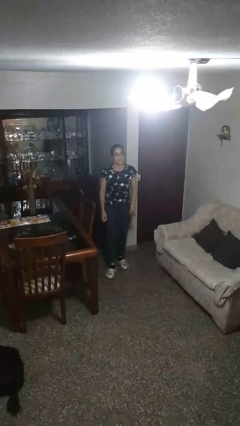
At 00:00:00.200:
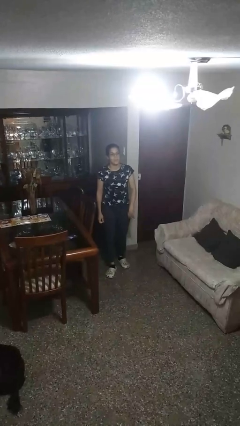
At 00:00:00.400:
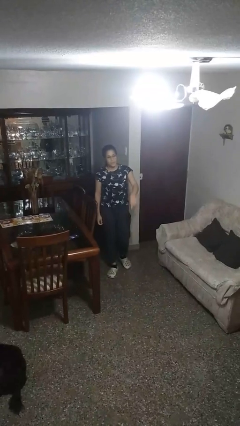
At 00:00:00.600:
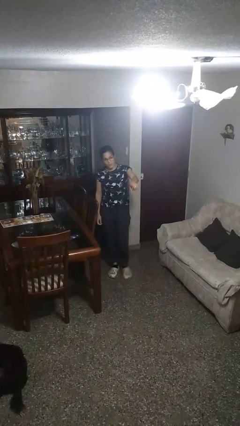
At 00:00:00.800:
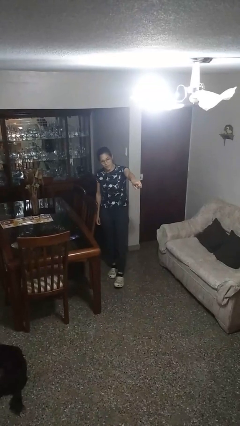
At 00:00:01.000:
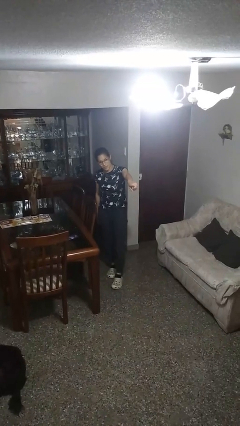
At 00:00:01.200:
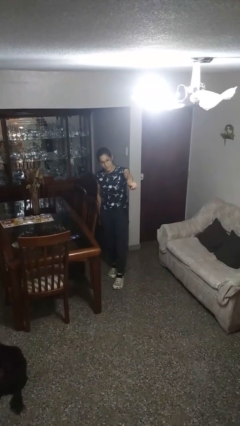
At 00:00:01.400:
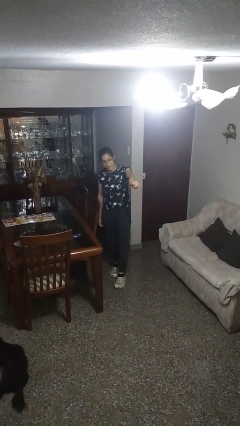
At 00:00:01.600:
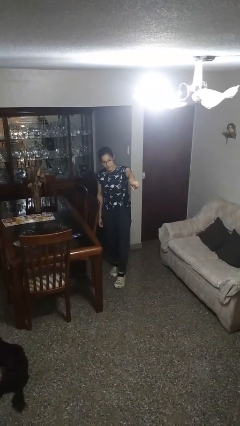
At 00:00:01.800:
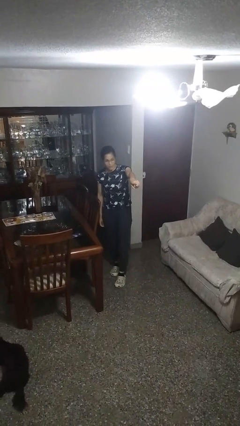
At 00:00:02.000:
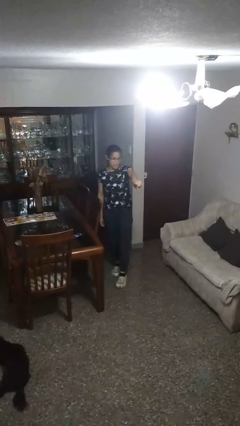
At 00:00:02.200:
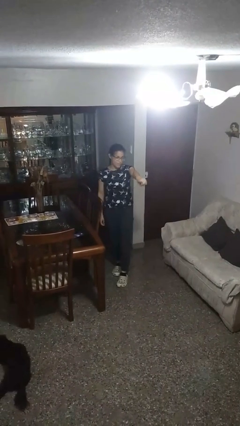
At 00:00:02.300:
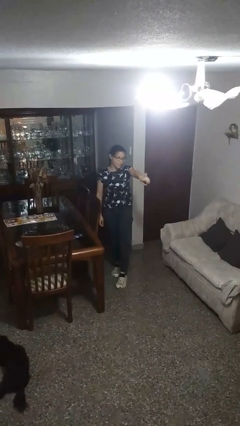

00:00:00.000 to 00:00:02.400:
person points at person

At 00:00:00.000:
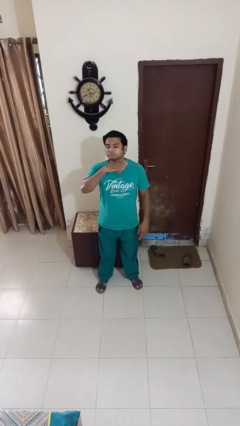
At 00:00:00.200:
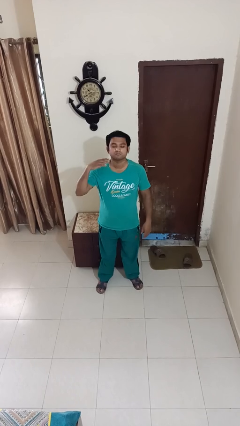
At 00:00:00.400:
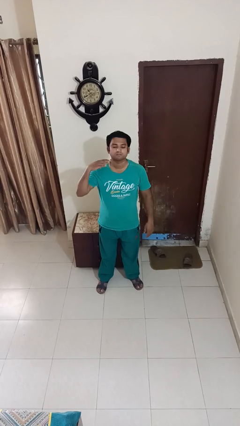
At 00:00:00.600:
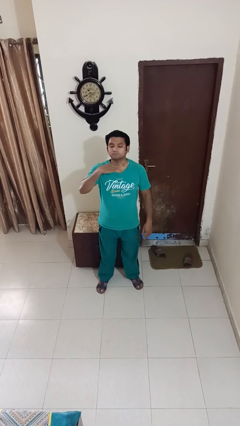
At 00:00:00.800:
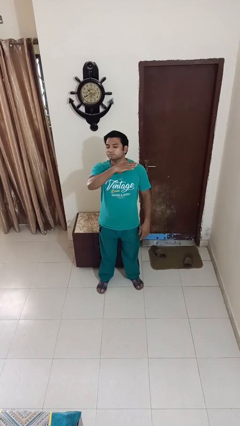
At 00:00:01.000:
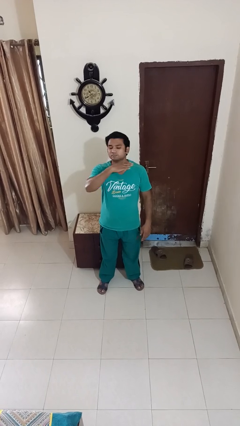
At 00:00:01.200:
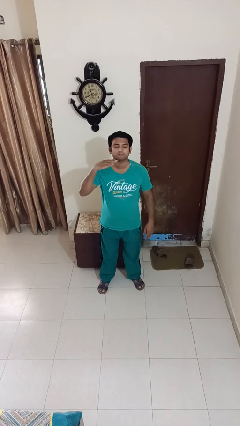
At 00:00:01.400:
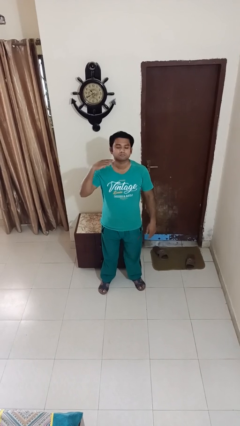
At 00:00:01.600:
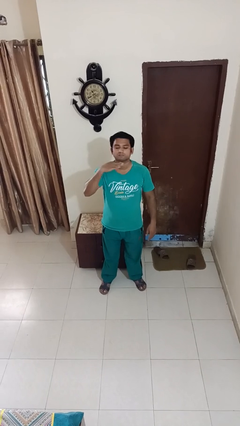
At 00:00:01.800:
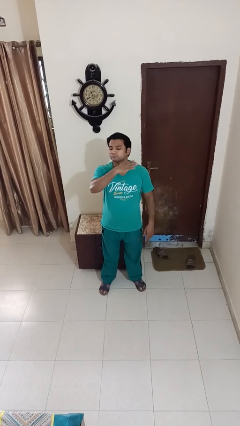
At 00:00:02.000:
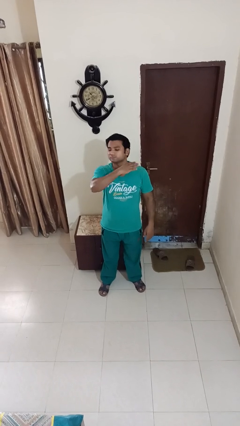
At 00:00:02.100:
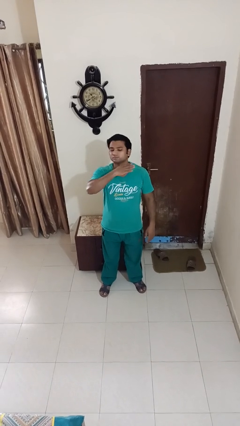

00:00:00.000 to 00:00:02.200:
person gestures cut

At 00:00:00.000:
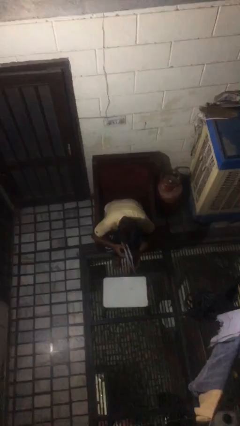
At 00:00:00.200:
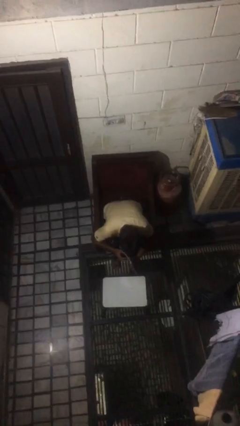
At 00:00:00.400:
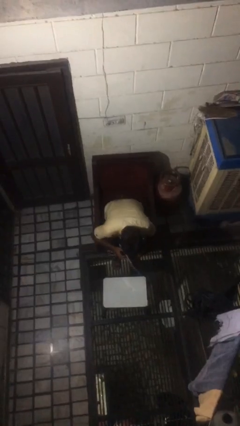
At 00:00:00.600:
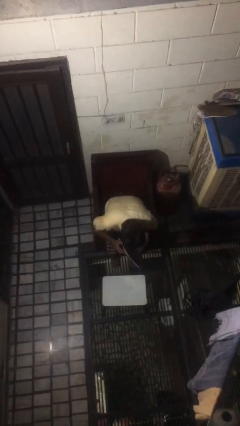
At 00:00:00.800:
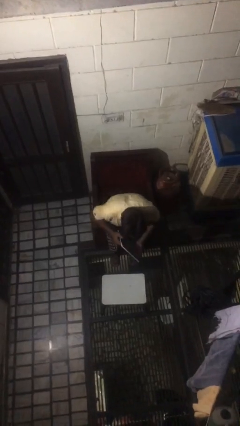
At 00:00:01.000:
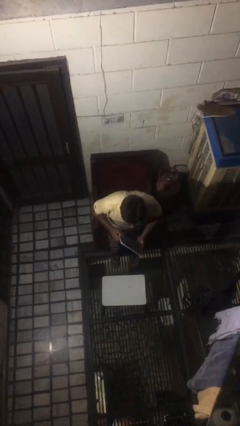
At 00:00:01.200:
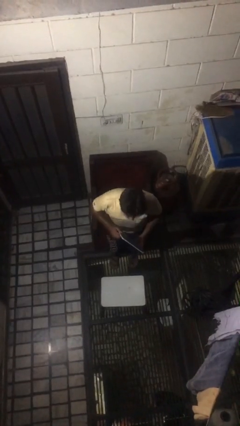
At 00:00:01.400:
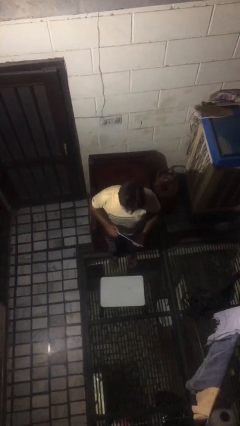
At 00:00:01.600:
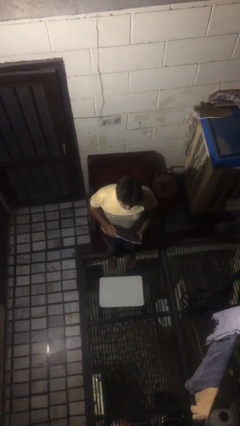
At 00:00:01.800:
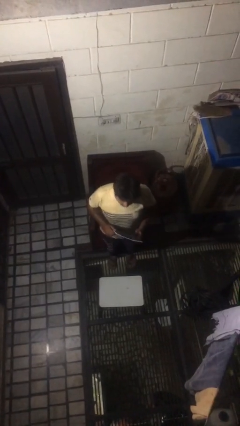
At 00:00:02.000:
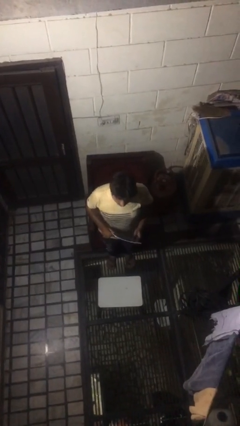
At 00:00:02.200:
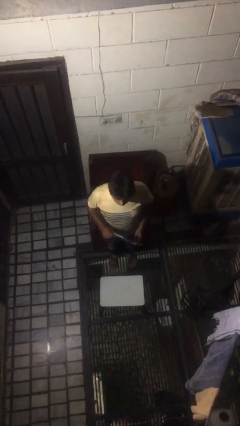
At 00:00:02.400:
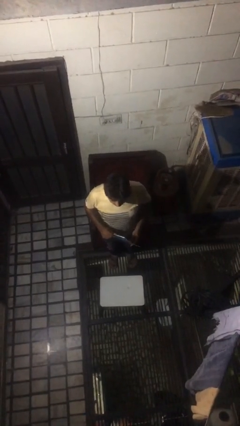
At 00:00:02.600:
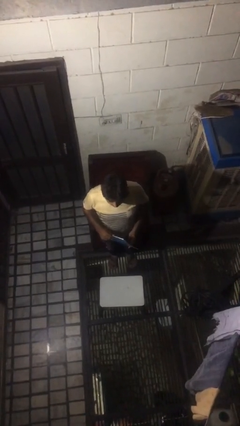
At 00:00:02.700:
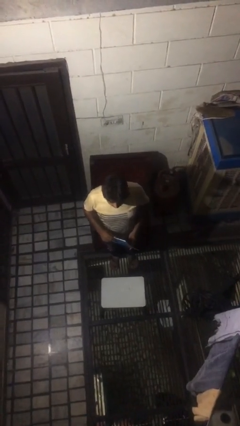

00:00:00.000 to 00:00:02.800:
person stands up

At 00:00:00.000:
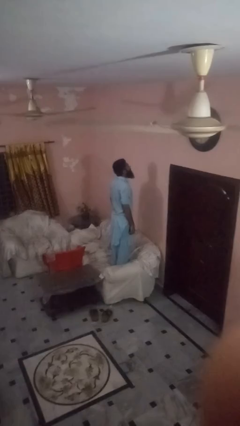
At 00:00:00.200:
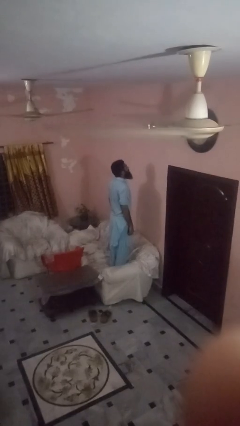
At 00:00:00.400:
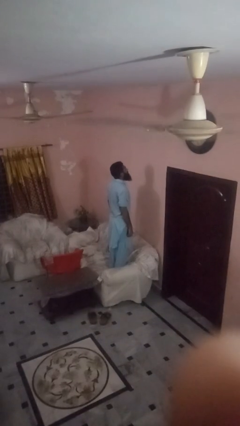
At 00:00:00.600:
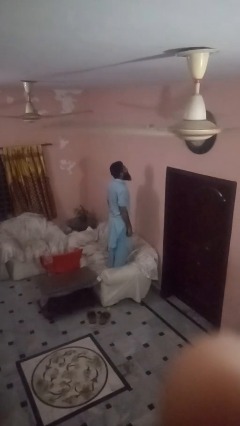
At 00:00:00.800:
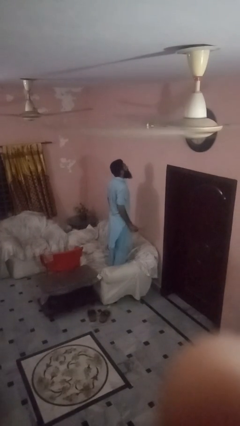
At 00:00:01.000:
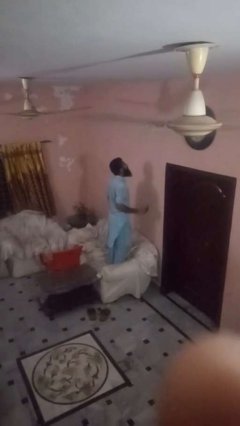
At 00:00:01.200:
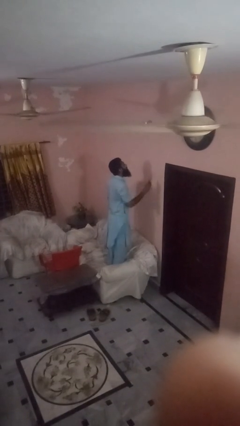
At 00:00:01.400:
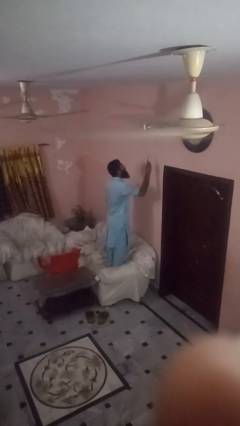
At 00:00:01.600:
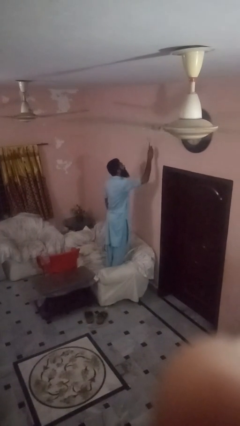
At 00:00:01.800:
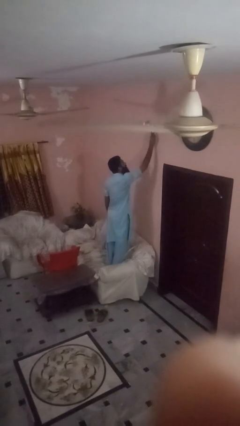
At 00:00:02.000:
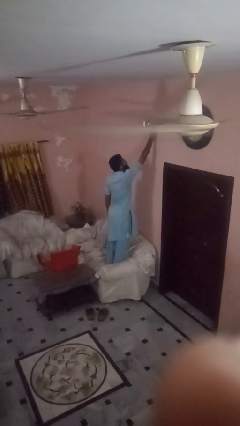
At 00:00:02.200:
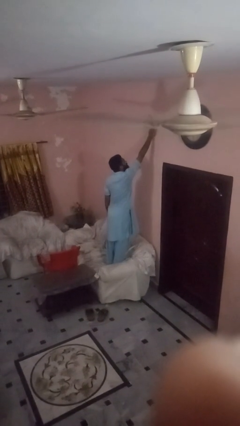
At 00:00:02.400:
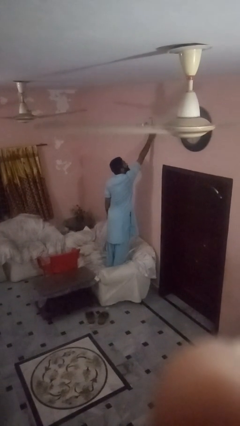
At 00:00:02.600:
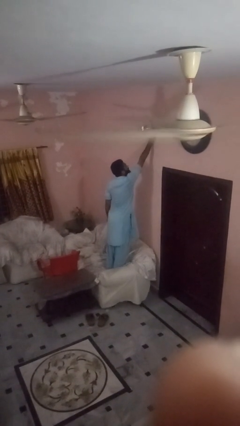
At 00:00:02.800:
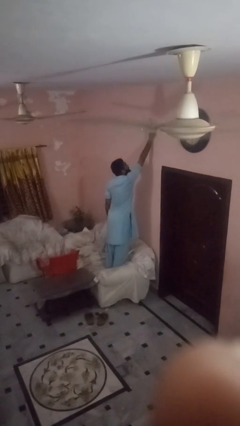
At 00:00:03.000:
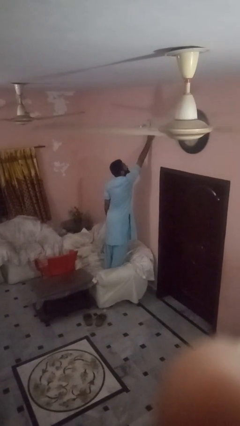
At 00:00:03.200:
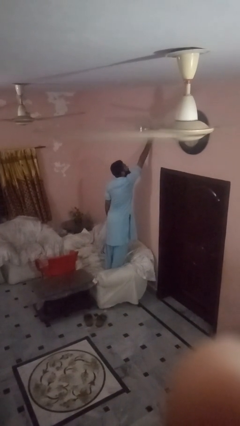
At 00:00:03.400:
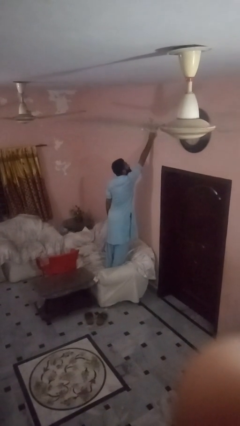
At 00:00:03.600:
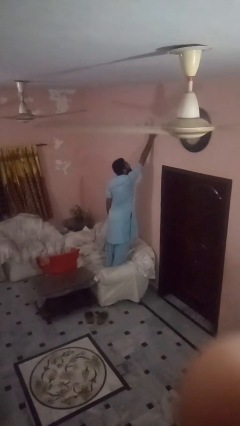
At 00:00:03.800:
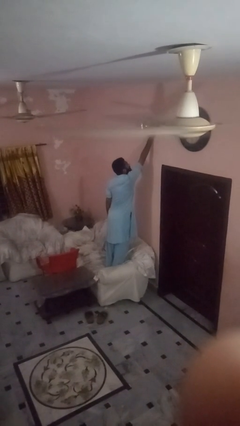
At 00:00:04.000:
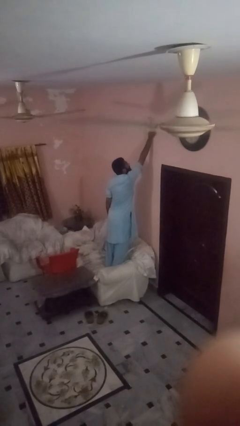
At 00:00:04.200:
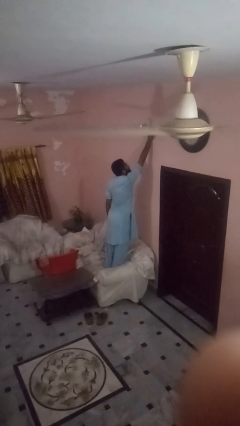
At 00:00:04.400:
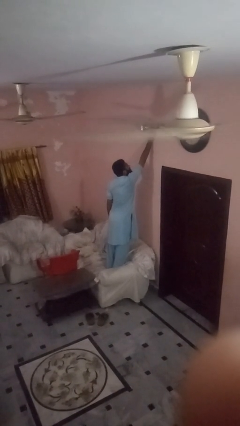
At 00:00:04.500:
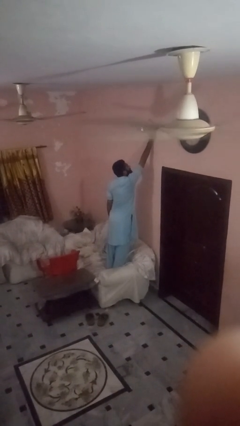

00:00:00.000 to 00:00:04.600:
person puts up smoke detector

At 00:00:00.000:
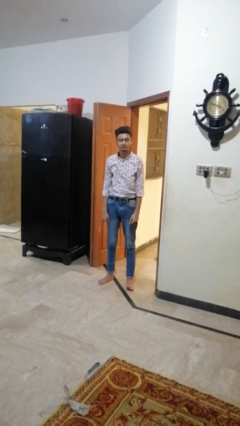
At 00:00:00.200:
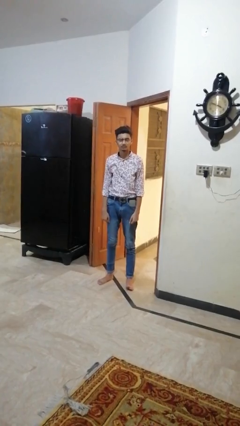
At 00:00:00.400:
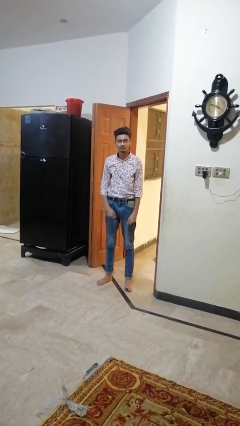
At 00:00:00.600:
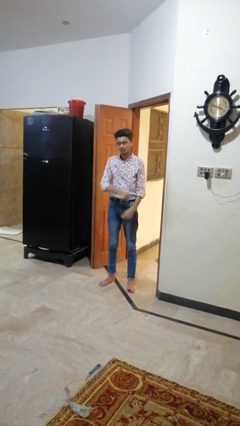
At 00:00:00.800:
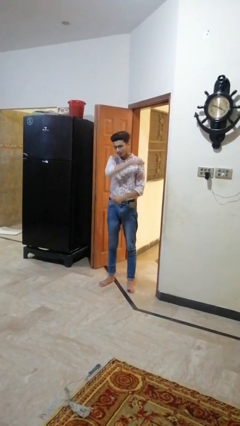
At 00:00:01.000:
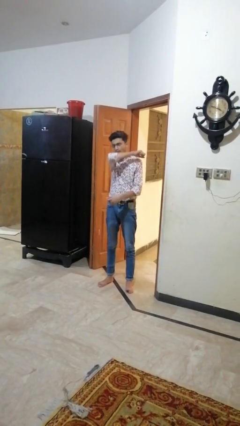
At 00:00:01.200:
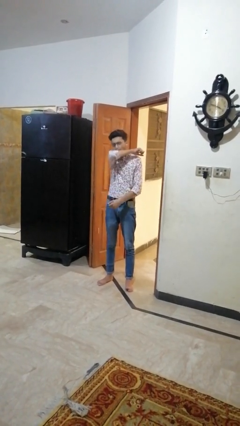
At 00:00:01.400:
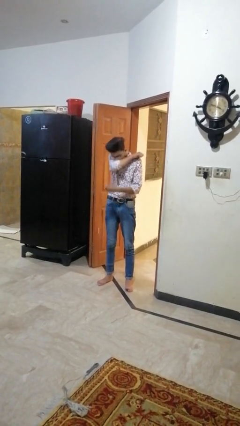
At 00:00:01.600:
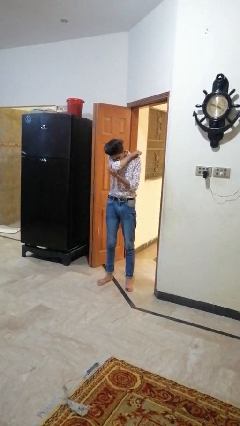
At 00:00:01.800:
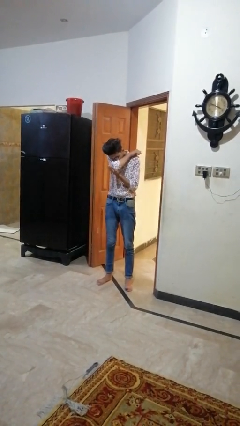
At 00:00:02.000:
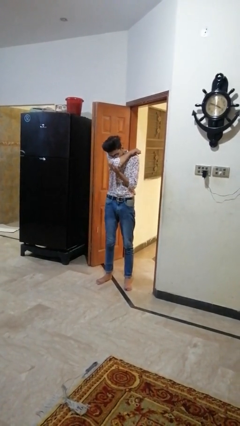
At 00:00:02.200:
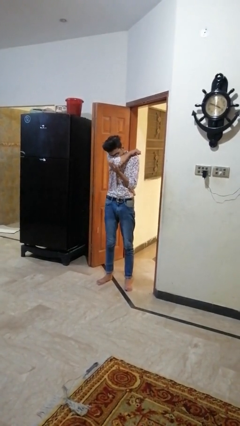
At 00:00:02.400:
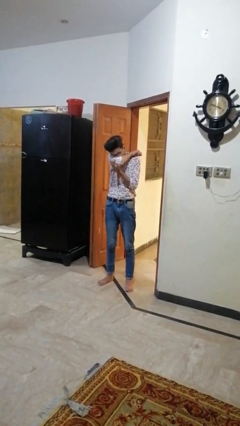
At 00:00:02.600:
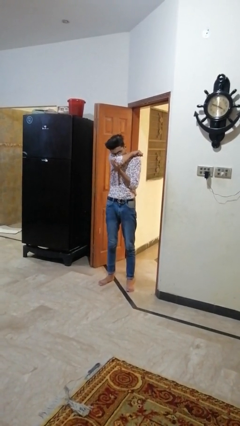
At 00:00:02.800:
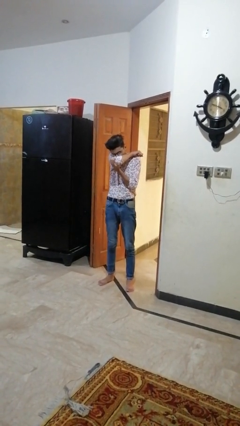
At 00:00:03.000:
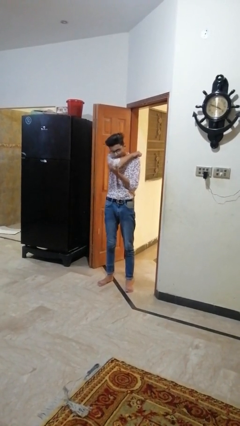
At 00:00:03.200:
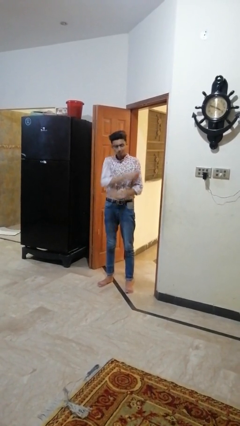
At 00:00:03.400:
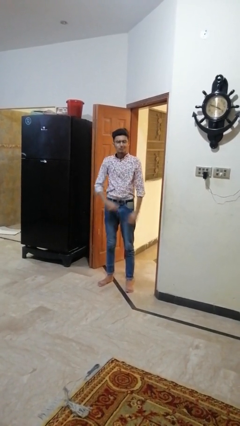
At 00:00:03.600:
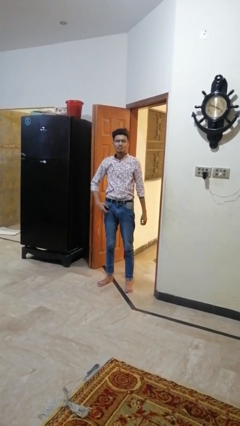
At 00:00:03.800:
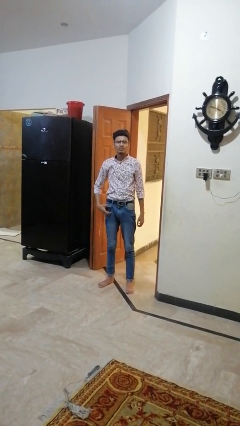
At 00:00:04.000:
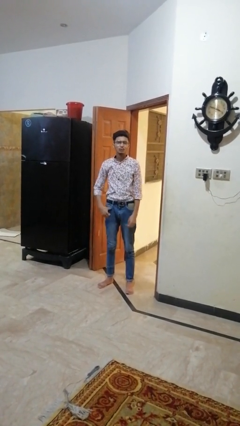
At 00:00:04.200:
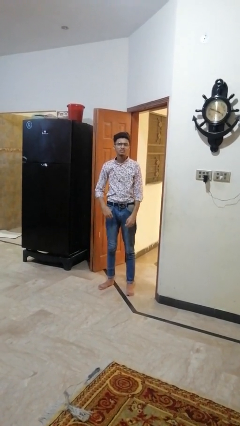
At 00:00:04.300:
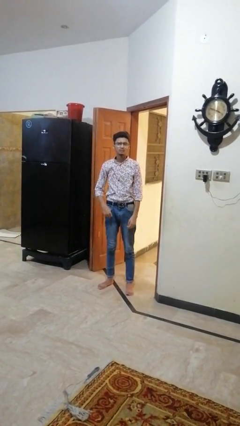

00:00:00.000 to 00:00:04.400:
person sneezes into arm

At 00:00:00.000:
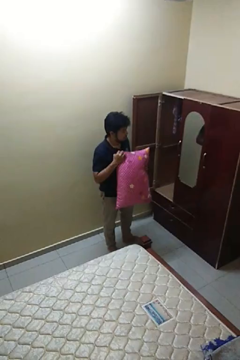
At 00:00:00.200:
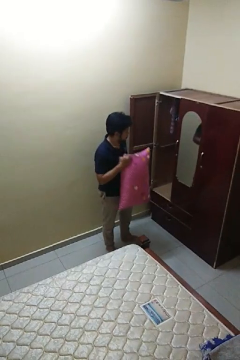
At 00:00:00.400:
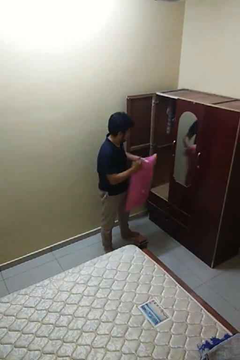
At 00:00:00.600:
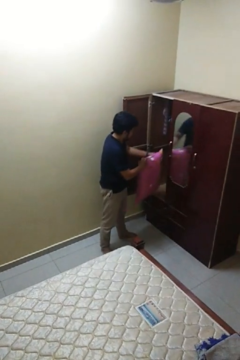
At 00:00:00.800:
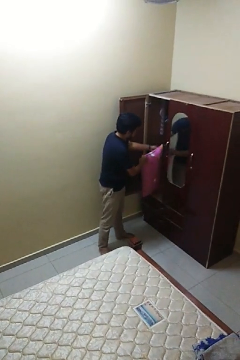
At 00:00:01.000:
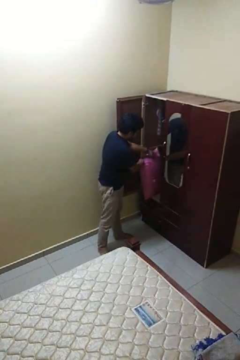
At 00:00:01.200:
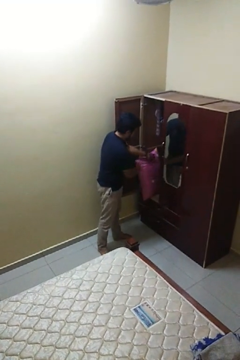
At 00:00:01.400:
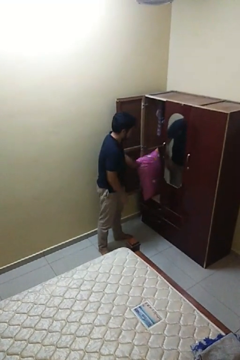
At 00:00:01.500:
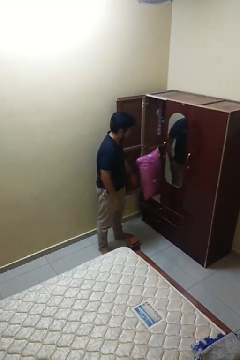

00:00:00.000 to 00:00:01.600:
person puts down object into cabinet
